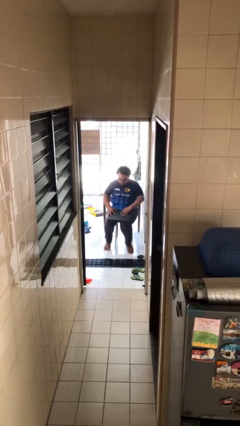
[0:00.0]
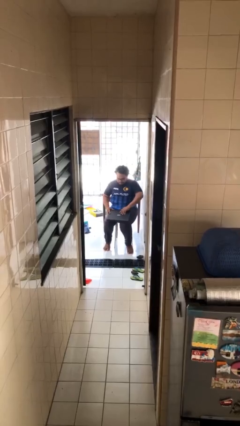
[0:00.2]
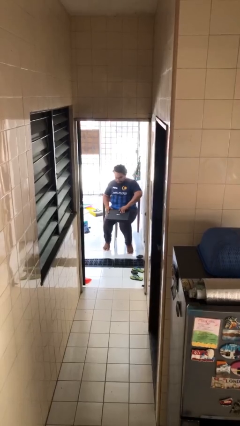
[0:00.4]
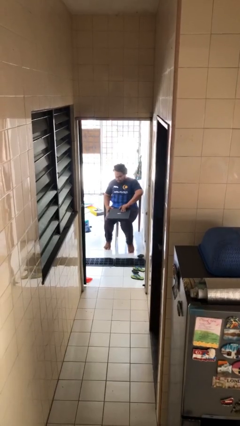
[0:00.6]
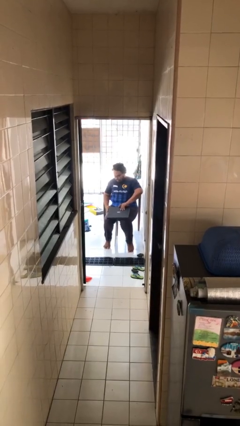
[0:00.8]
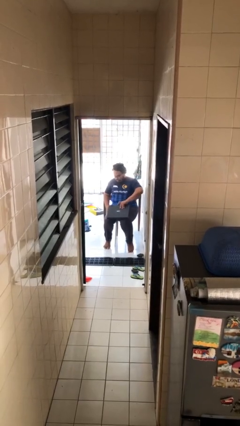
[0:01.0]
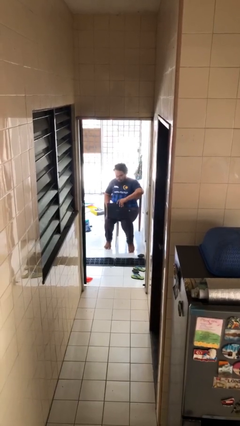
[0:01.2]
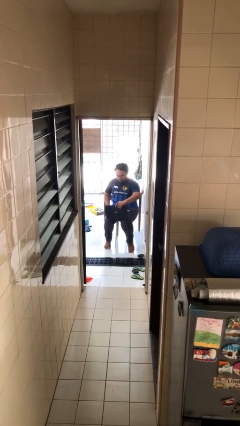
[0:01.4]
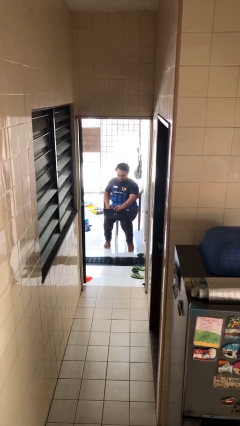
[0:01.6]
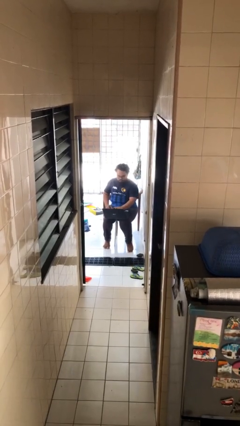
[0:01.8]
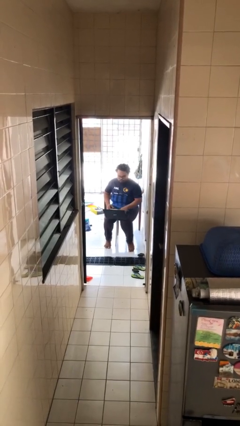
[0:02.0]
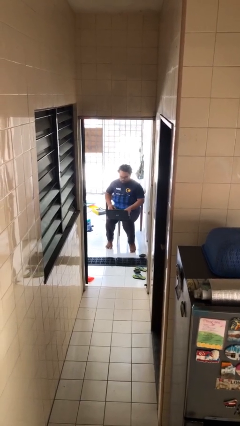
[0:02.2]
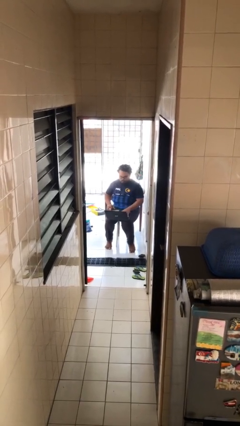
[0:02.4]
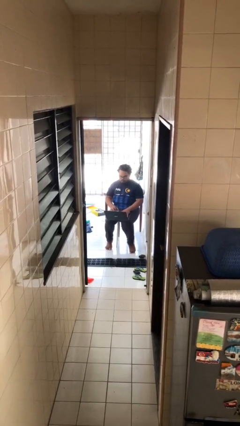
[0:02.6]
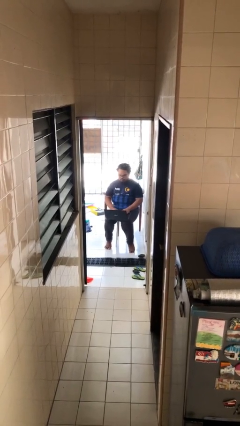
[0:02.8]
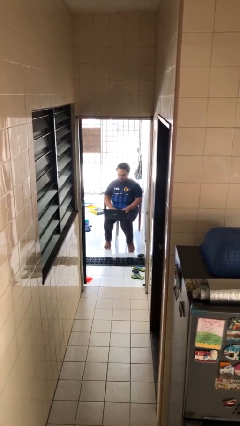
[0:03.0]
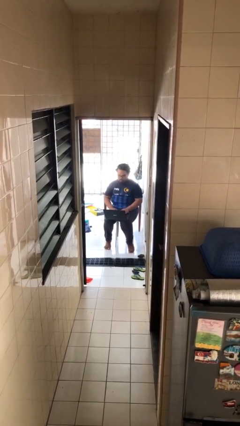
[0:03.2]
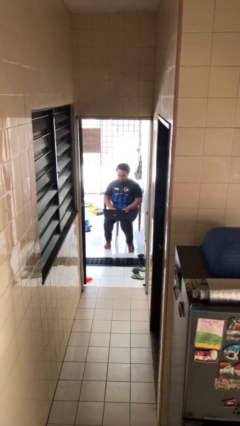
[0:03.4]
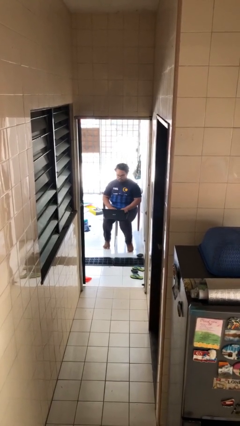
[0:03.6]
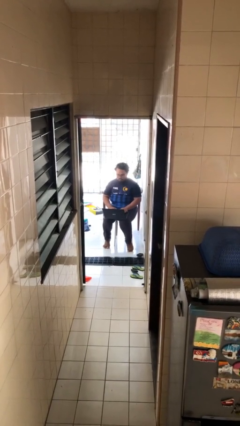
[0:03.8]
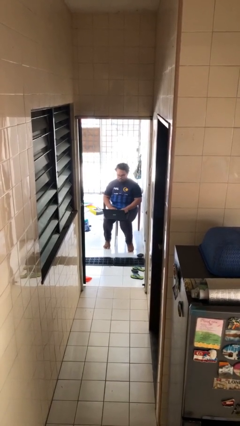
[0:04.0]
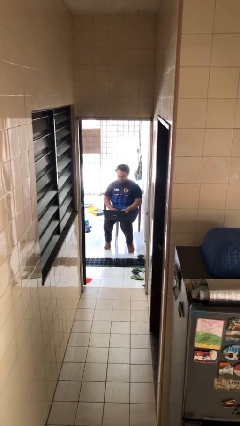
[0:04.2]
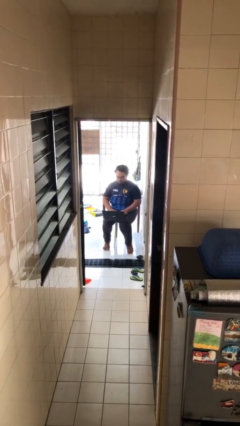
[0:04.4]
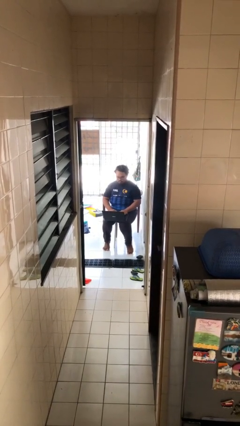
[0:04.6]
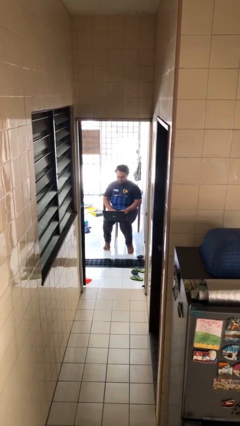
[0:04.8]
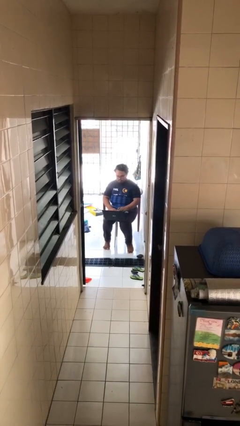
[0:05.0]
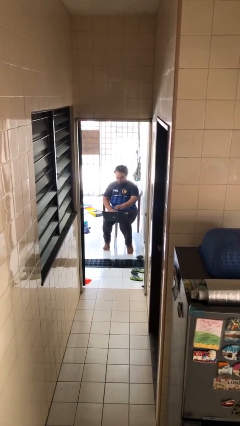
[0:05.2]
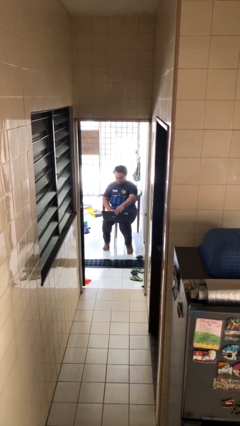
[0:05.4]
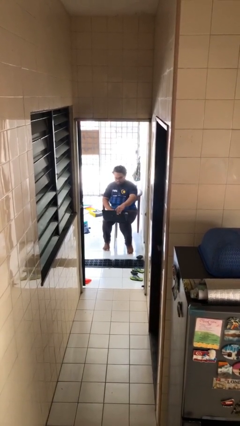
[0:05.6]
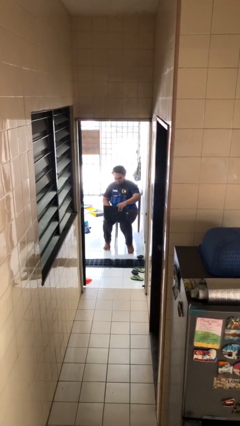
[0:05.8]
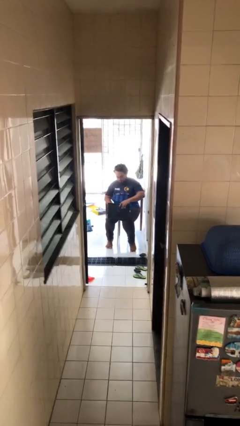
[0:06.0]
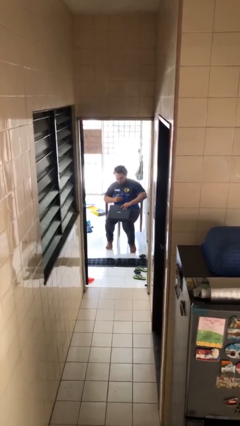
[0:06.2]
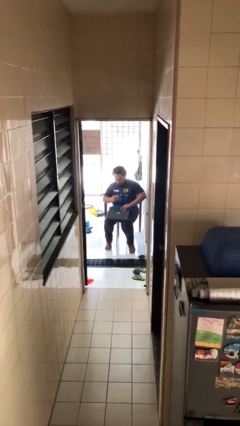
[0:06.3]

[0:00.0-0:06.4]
person interacts with laptop

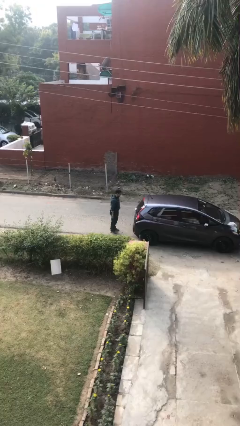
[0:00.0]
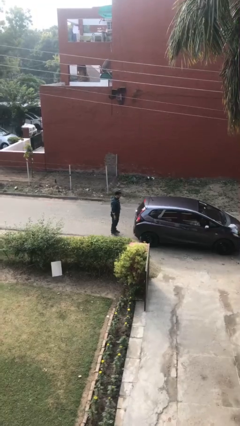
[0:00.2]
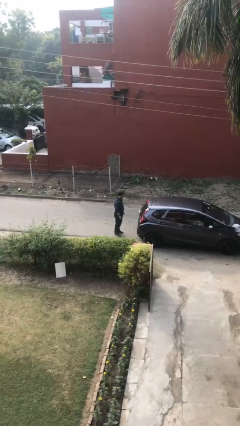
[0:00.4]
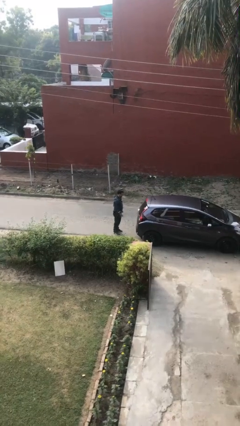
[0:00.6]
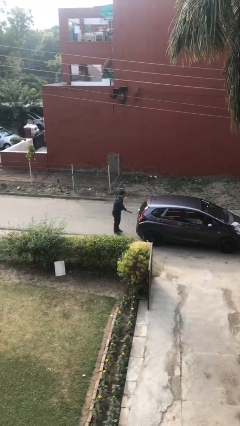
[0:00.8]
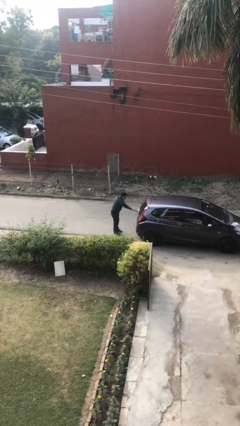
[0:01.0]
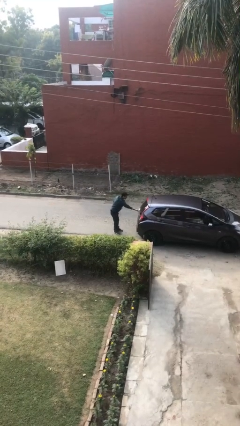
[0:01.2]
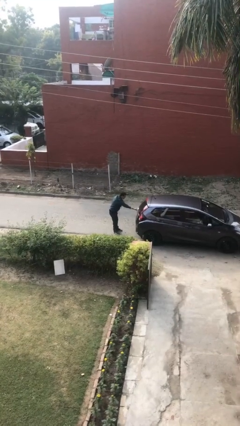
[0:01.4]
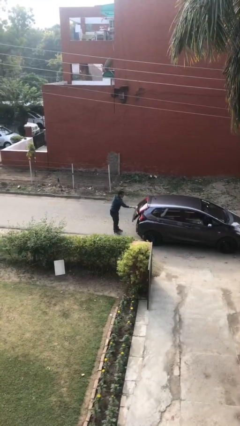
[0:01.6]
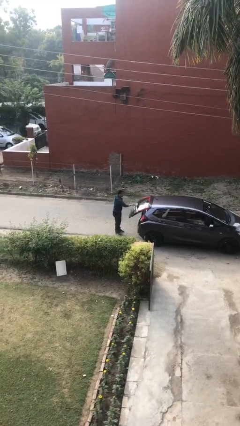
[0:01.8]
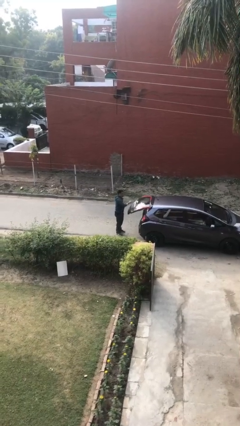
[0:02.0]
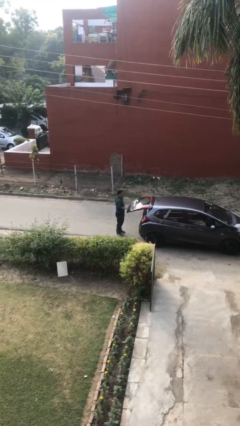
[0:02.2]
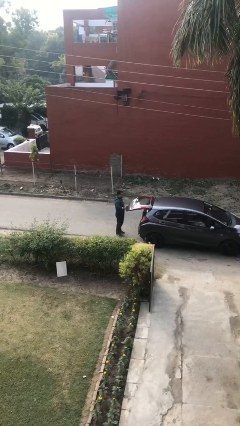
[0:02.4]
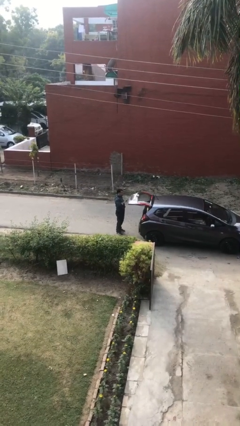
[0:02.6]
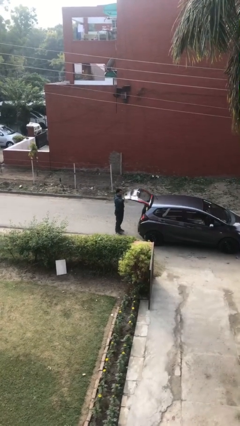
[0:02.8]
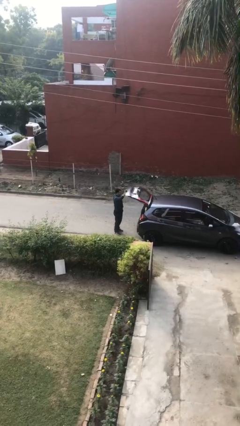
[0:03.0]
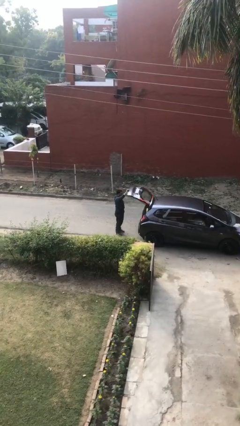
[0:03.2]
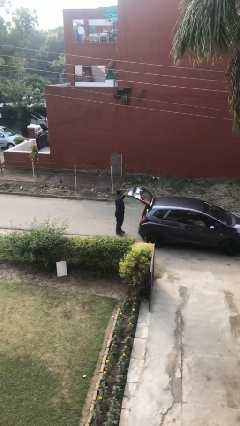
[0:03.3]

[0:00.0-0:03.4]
person opens car trunk

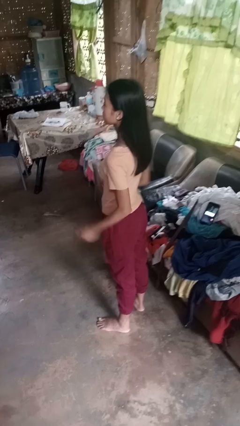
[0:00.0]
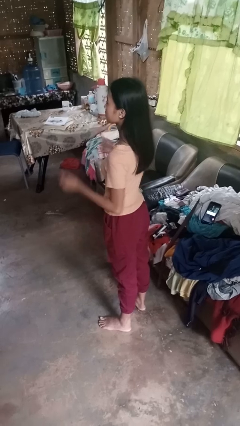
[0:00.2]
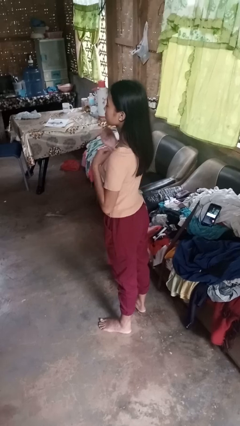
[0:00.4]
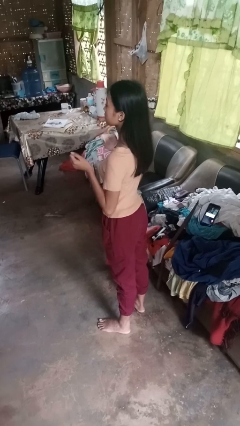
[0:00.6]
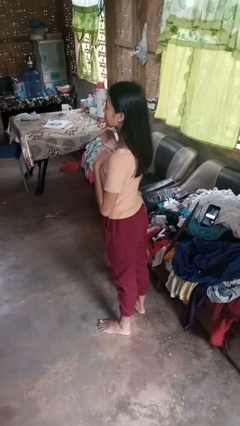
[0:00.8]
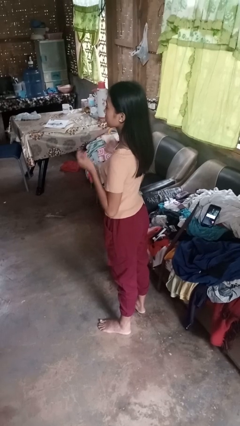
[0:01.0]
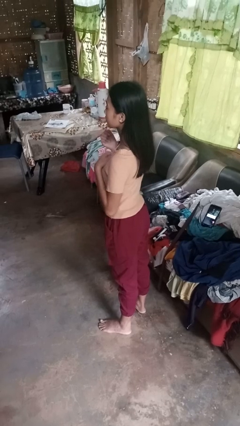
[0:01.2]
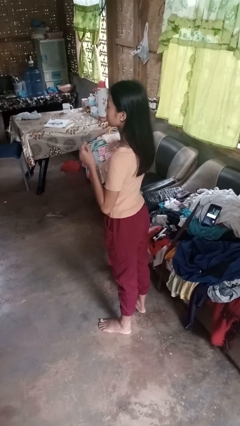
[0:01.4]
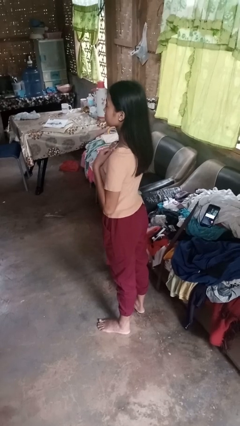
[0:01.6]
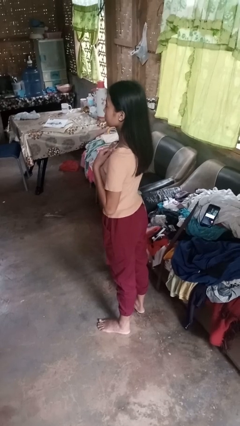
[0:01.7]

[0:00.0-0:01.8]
person drums on chest

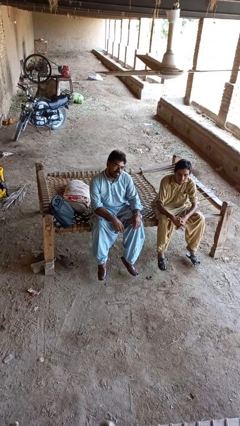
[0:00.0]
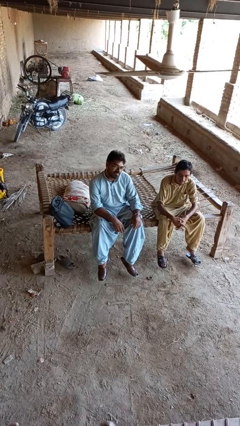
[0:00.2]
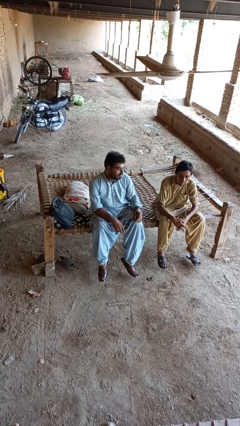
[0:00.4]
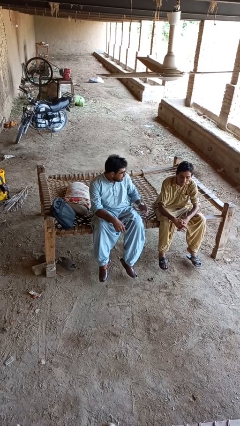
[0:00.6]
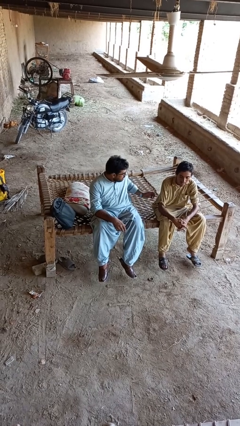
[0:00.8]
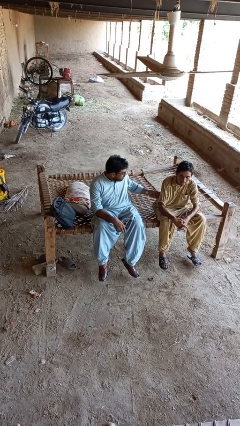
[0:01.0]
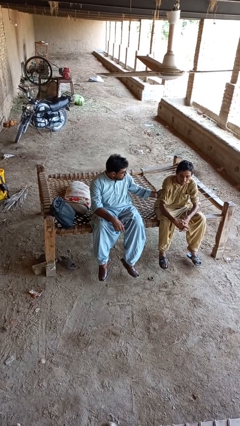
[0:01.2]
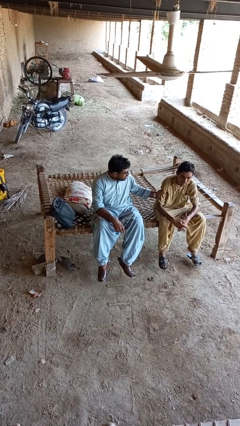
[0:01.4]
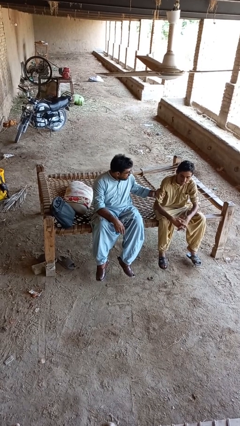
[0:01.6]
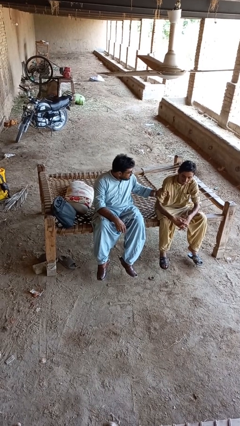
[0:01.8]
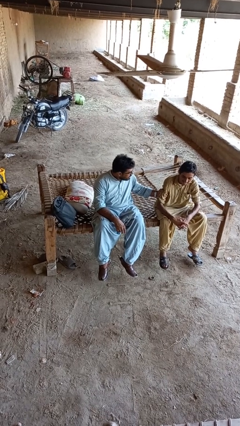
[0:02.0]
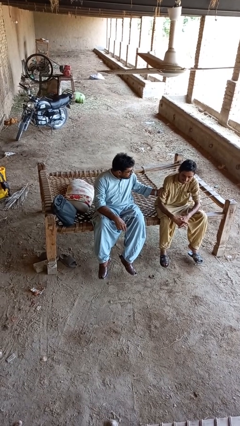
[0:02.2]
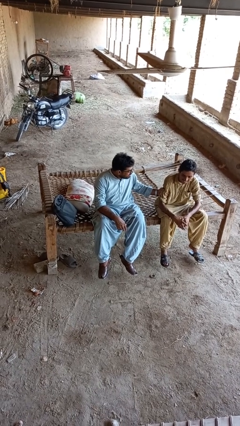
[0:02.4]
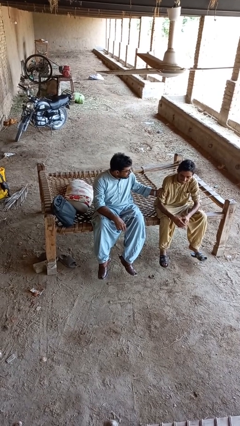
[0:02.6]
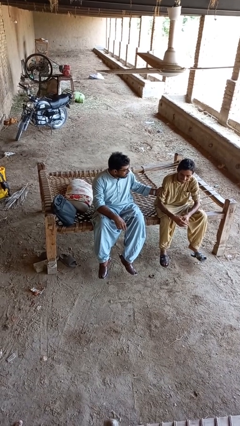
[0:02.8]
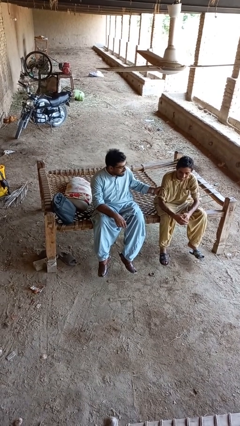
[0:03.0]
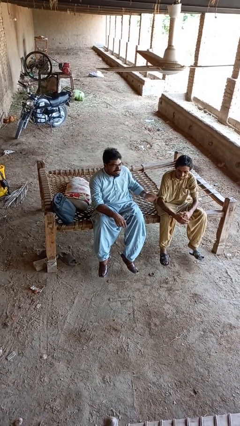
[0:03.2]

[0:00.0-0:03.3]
person grabs person by bicep

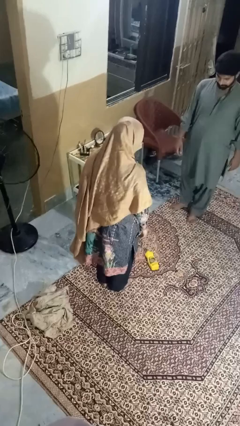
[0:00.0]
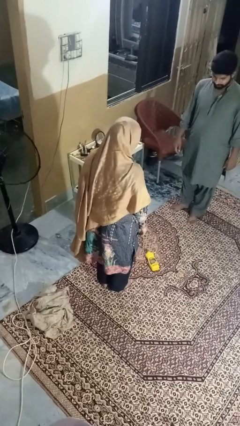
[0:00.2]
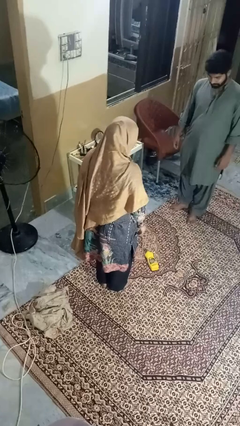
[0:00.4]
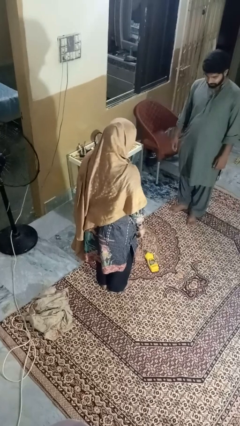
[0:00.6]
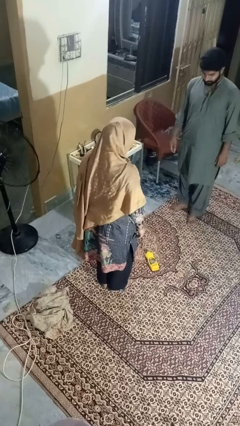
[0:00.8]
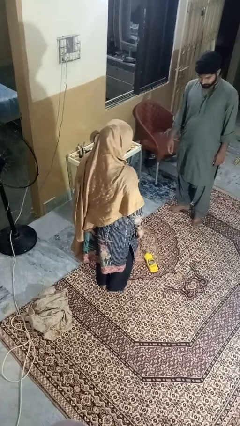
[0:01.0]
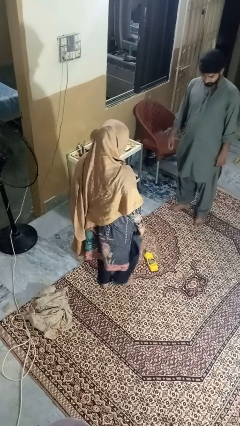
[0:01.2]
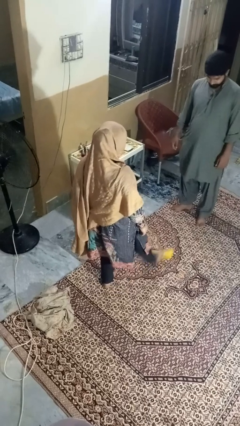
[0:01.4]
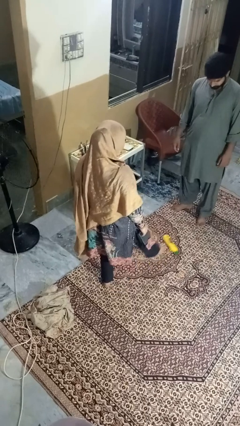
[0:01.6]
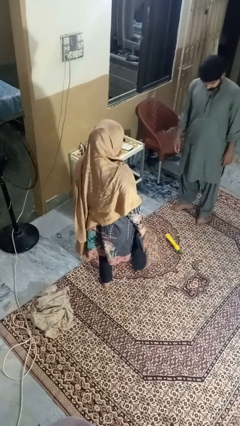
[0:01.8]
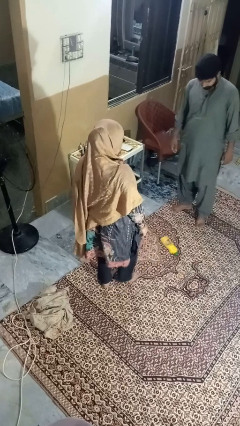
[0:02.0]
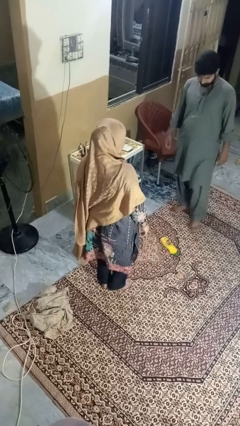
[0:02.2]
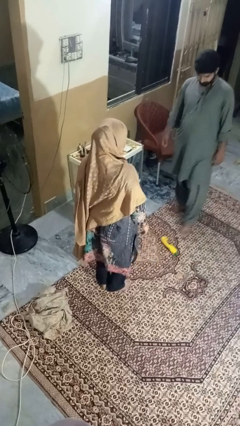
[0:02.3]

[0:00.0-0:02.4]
person kicks object to person
